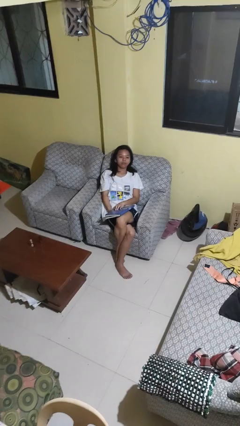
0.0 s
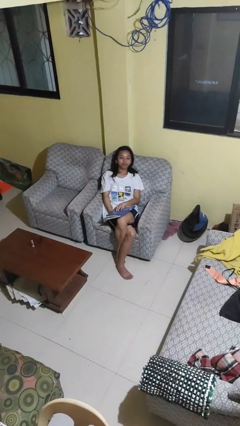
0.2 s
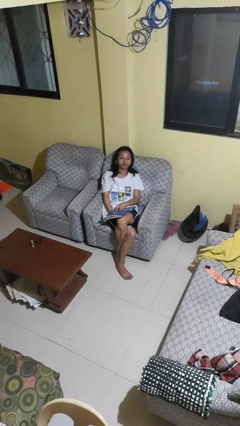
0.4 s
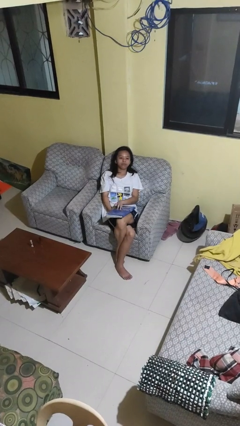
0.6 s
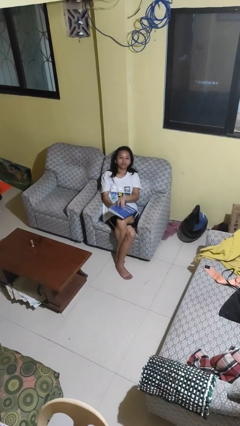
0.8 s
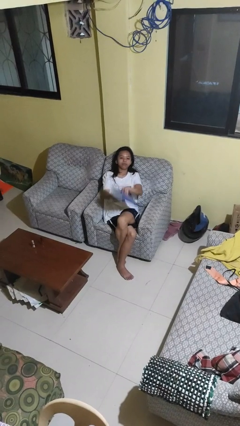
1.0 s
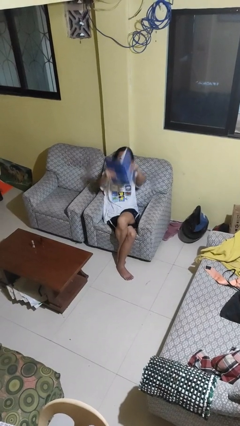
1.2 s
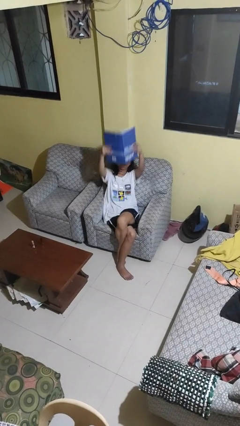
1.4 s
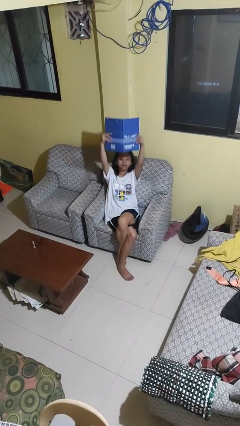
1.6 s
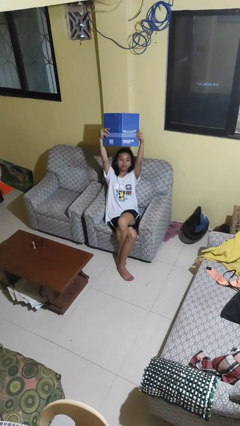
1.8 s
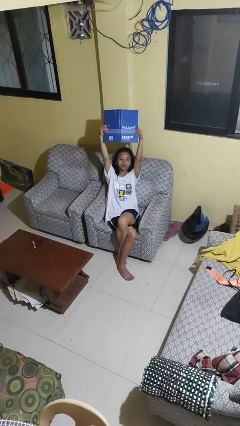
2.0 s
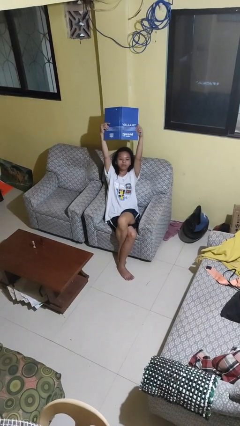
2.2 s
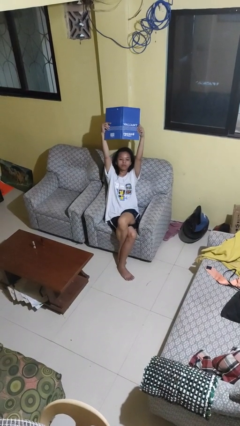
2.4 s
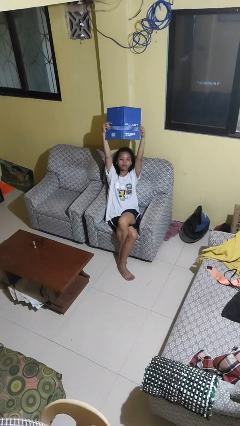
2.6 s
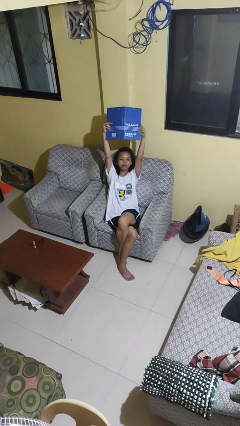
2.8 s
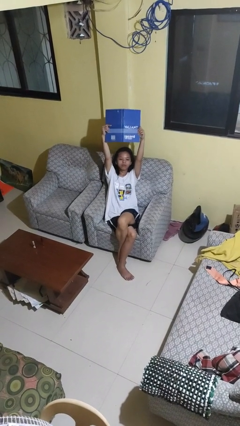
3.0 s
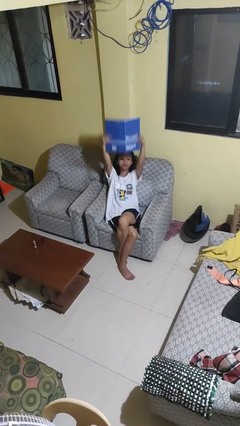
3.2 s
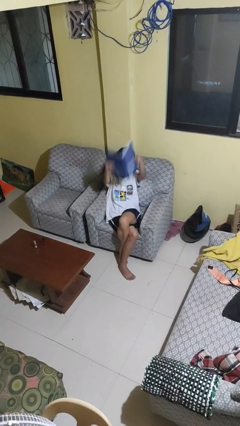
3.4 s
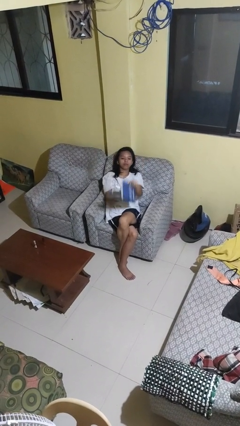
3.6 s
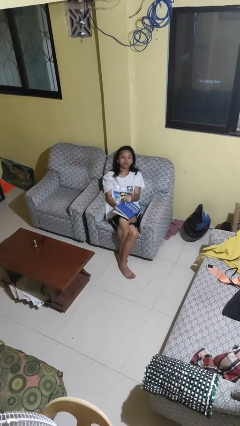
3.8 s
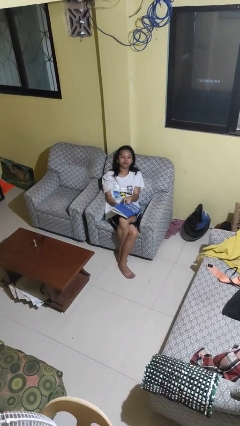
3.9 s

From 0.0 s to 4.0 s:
person holds object above head

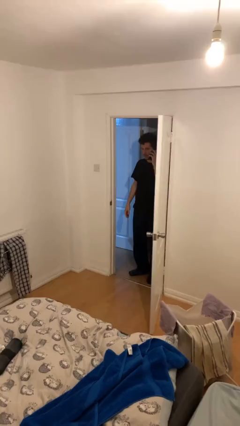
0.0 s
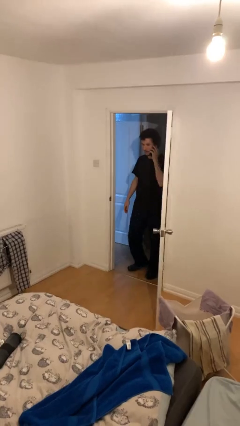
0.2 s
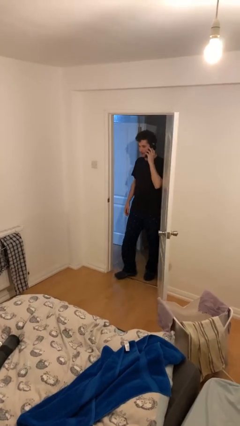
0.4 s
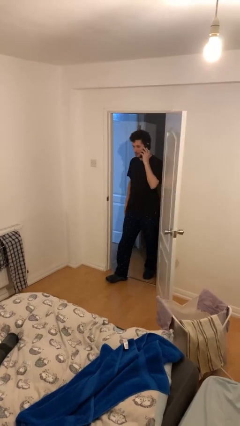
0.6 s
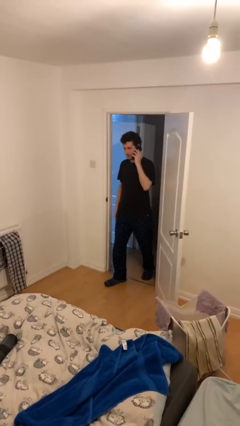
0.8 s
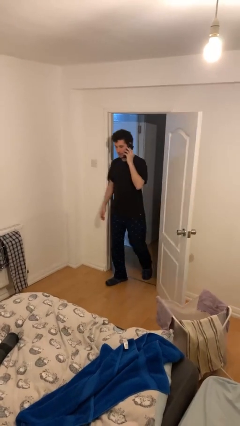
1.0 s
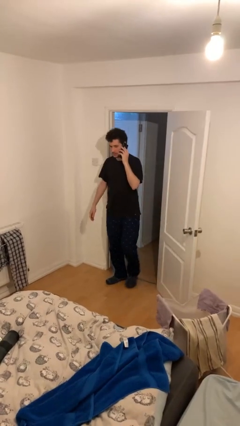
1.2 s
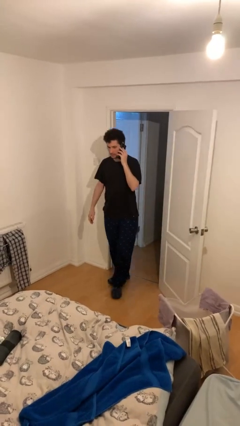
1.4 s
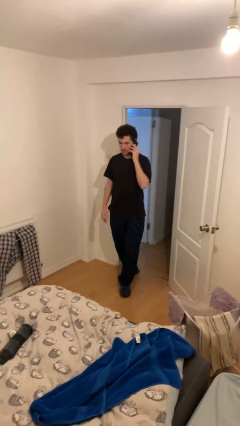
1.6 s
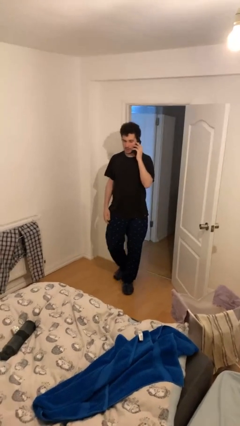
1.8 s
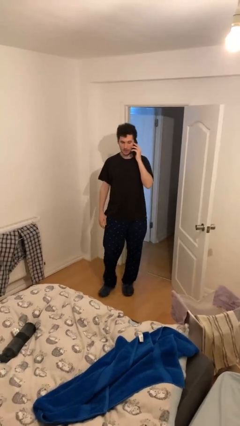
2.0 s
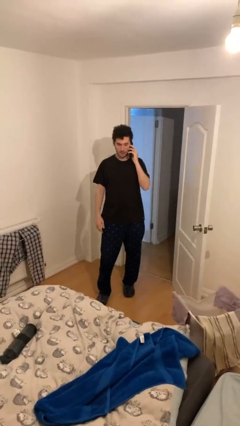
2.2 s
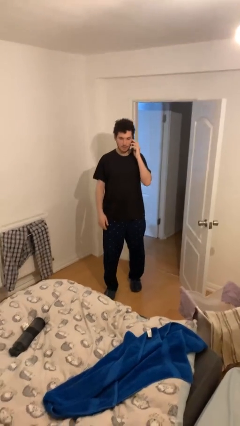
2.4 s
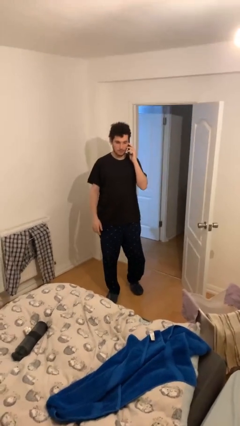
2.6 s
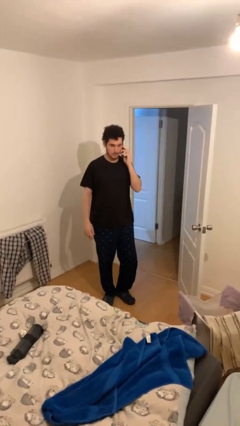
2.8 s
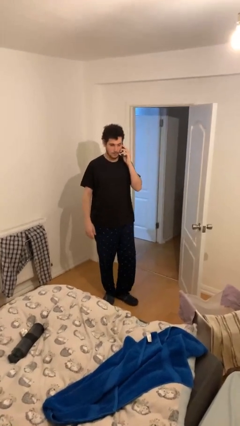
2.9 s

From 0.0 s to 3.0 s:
person enters scene through structure

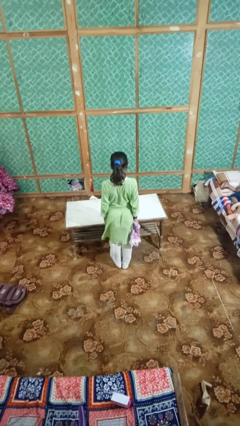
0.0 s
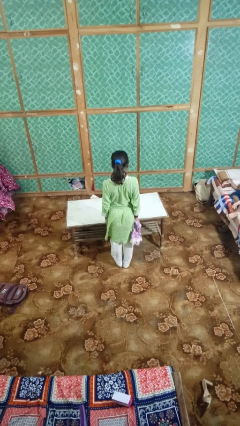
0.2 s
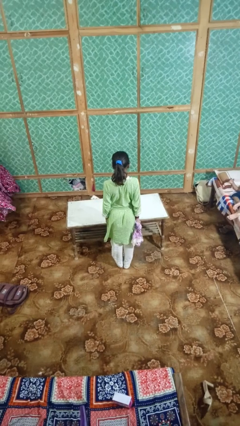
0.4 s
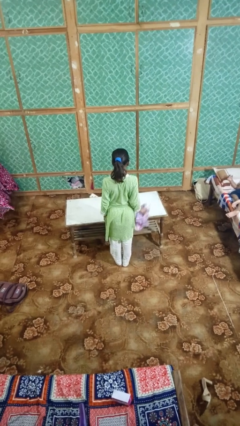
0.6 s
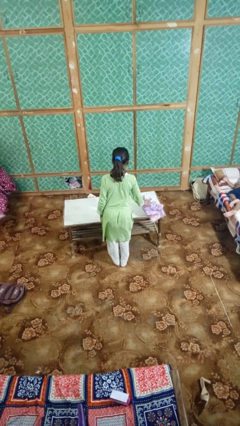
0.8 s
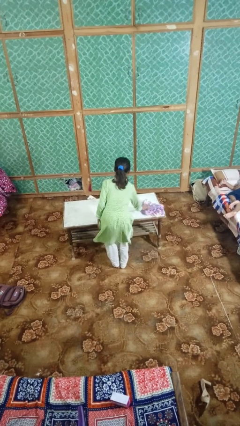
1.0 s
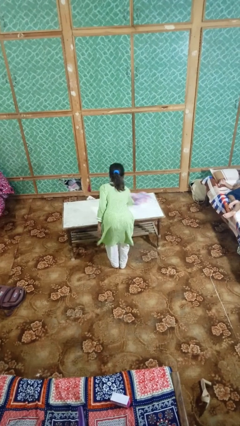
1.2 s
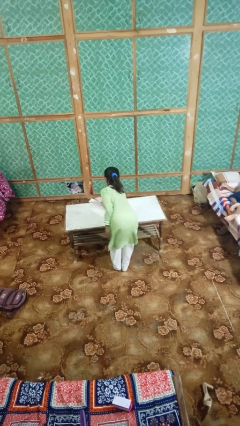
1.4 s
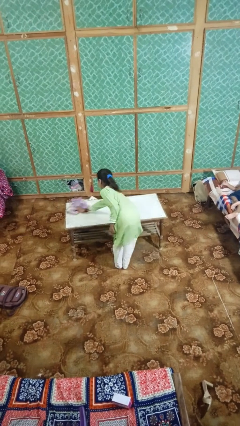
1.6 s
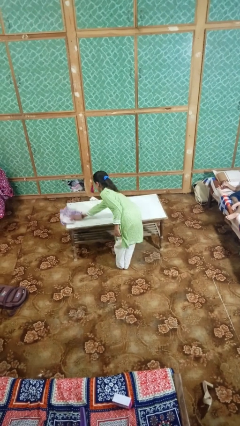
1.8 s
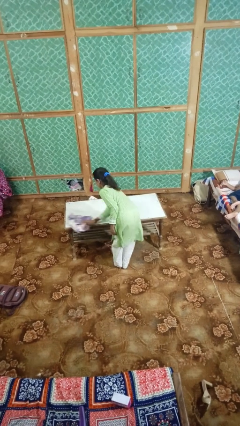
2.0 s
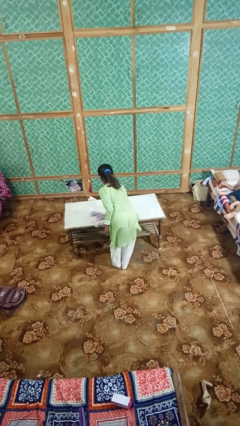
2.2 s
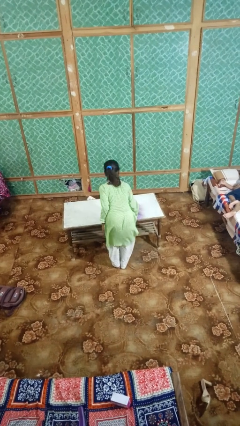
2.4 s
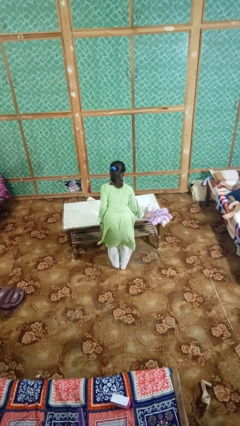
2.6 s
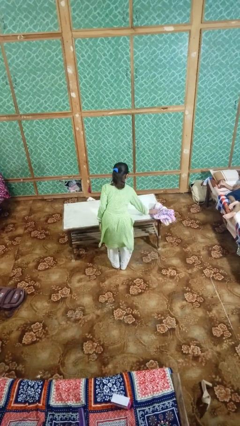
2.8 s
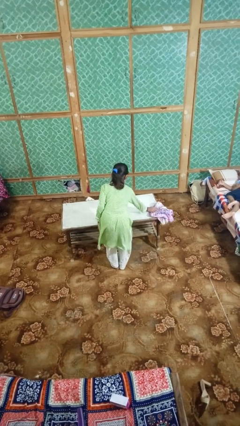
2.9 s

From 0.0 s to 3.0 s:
person cleans table with rag

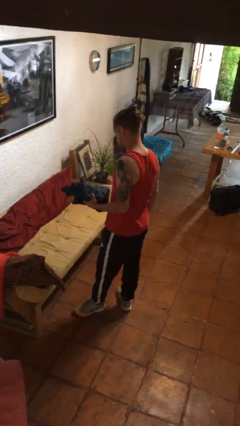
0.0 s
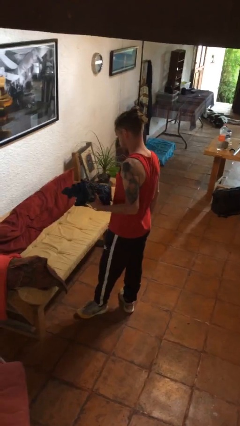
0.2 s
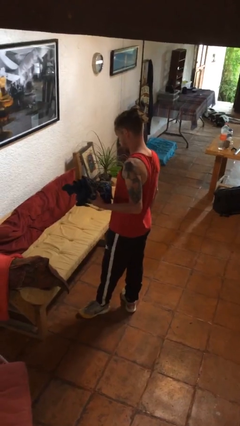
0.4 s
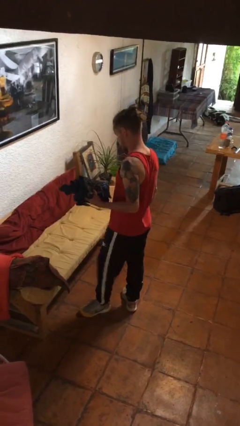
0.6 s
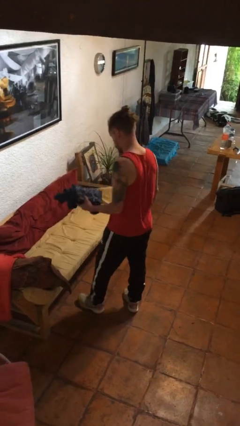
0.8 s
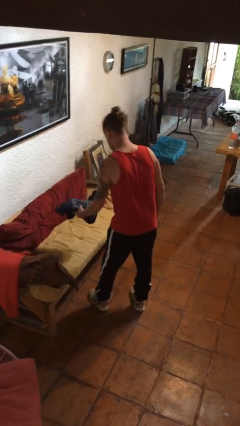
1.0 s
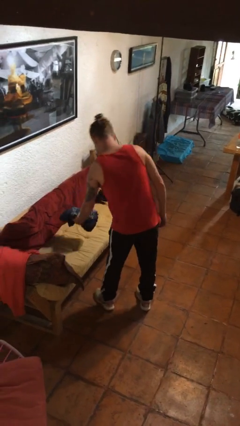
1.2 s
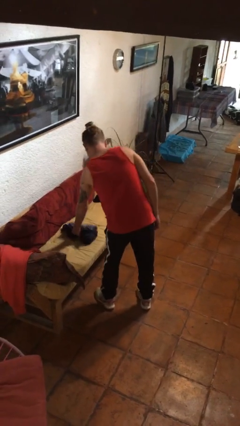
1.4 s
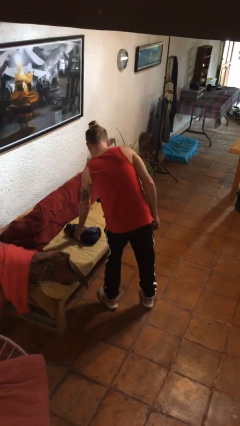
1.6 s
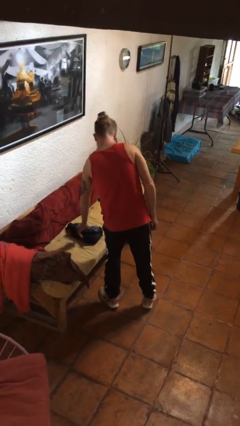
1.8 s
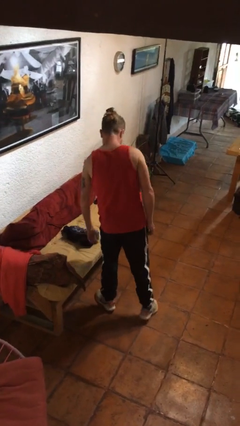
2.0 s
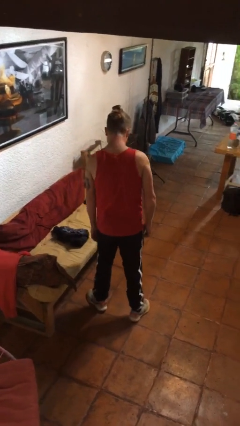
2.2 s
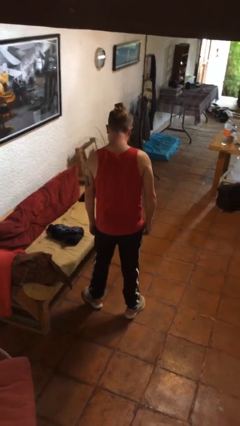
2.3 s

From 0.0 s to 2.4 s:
person puts down object on couch

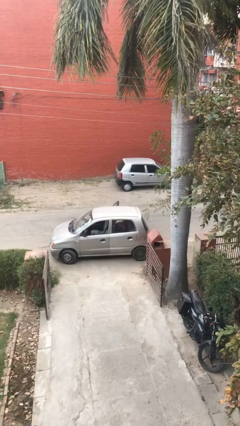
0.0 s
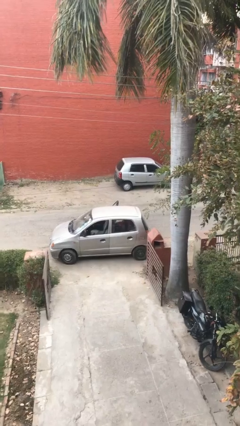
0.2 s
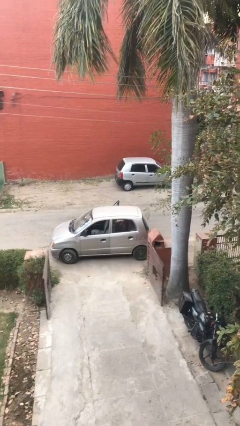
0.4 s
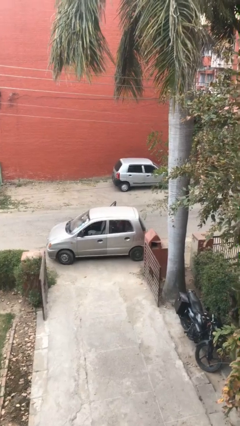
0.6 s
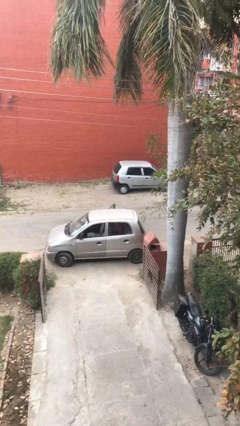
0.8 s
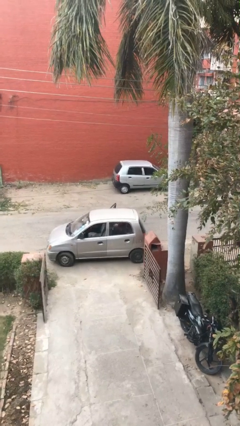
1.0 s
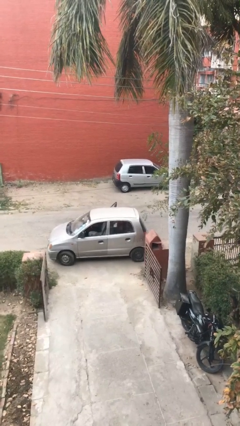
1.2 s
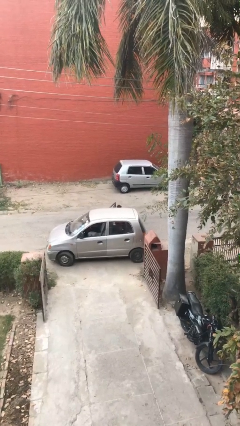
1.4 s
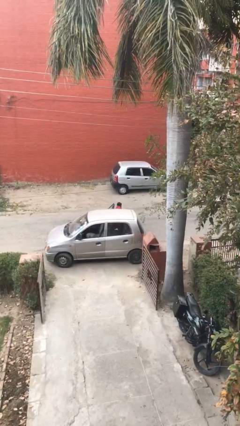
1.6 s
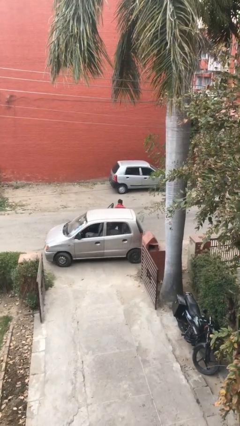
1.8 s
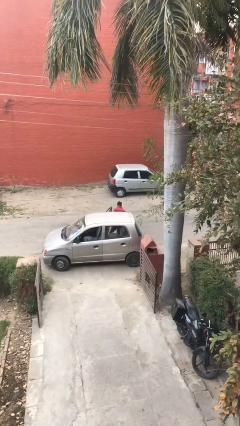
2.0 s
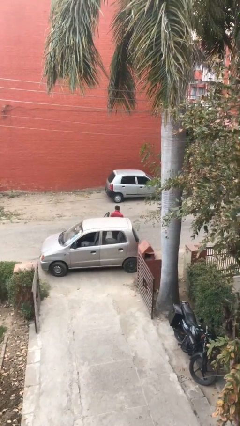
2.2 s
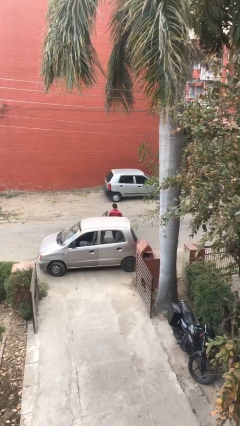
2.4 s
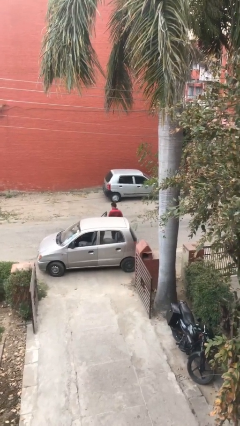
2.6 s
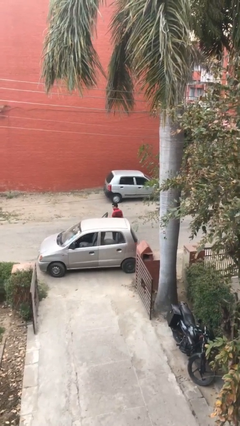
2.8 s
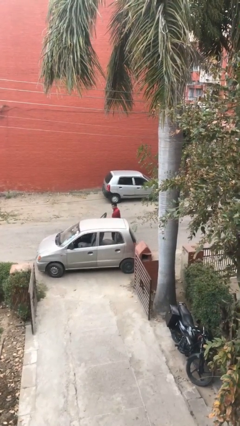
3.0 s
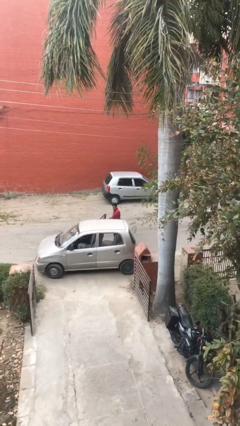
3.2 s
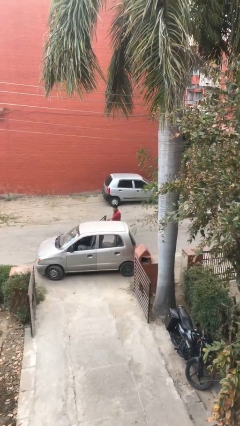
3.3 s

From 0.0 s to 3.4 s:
person exits car

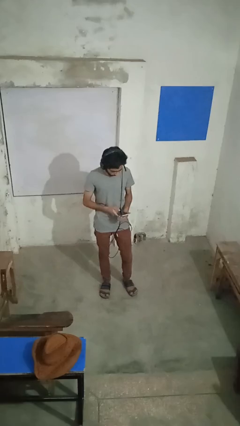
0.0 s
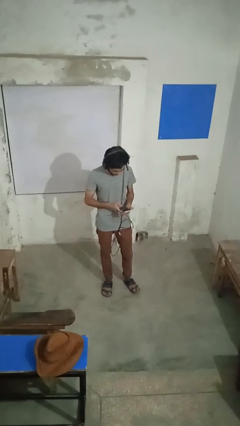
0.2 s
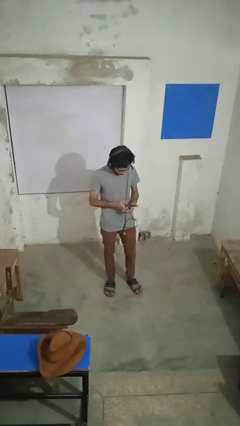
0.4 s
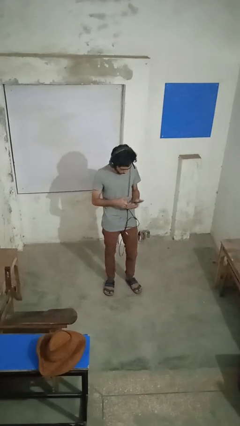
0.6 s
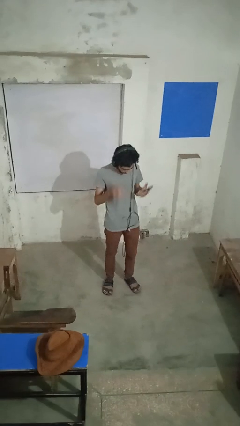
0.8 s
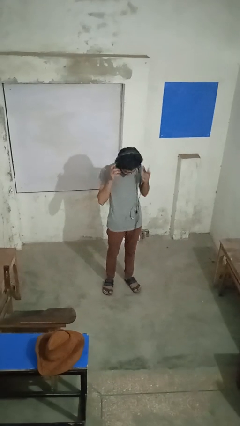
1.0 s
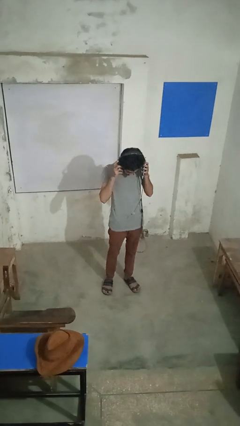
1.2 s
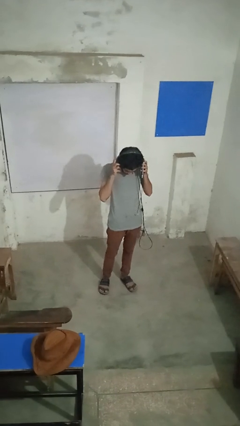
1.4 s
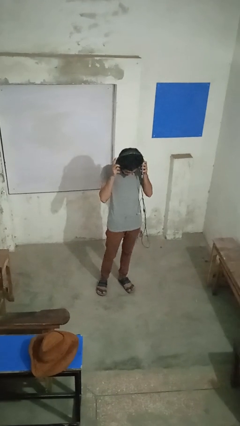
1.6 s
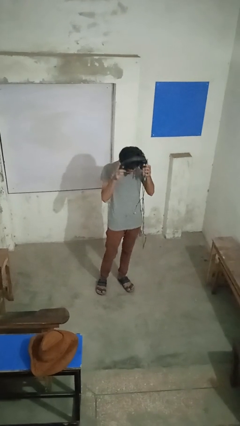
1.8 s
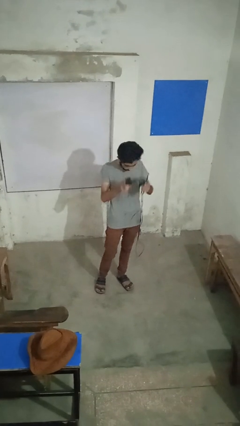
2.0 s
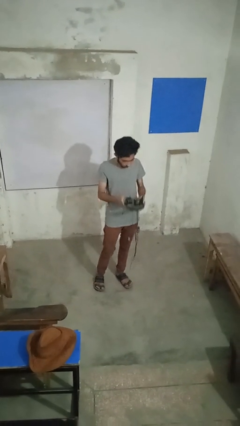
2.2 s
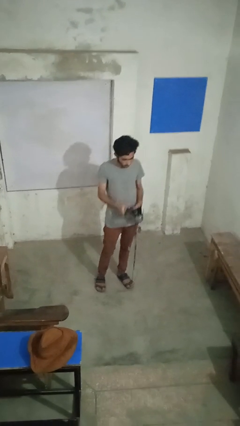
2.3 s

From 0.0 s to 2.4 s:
person takes off headphones
